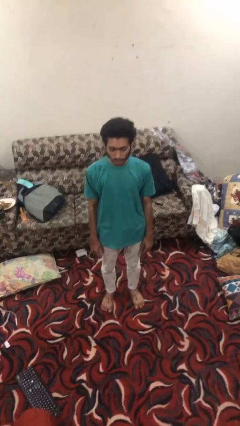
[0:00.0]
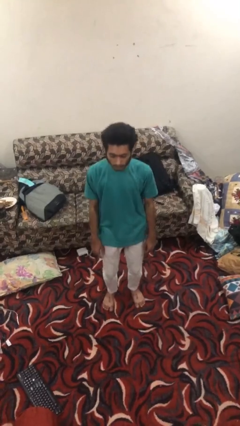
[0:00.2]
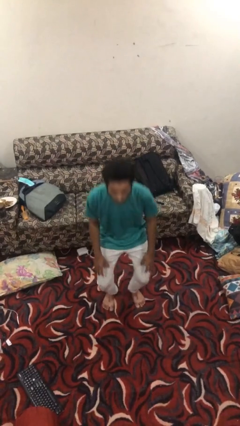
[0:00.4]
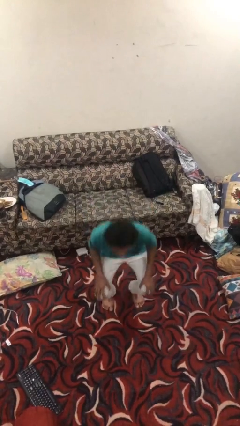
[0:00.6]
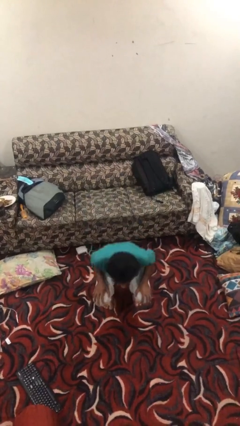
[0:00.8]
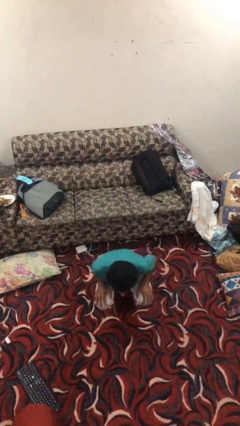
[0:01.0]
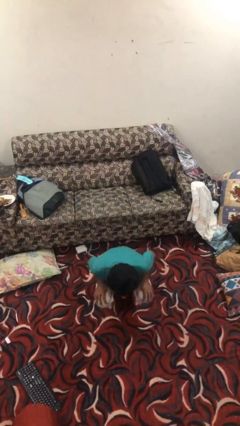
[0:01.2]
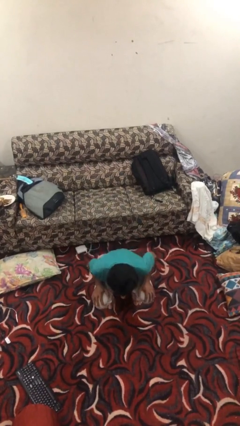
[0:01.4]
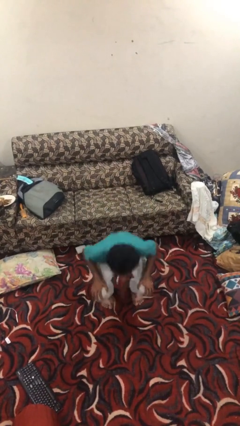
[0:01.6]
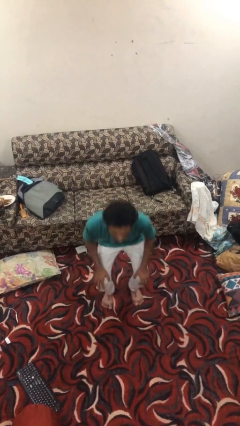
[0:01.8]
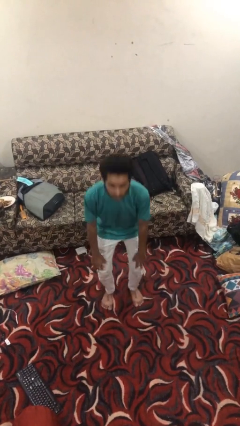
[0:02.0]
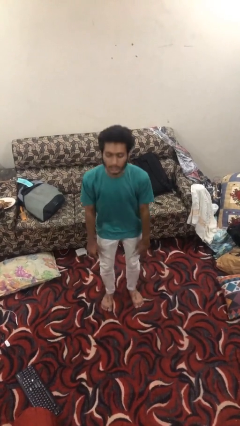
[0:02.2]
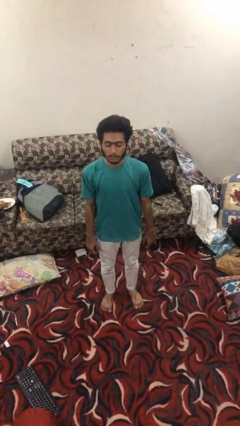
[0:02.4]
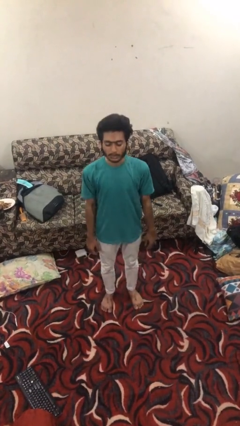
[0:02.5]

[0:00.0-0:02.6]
person exercises with situp

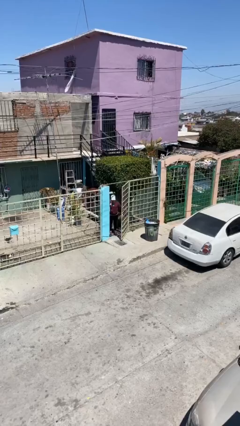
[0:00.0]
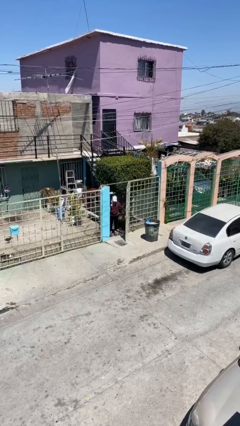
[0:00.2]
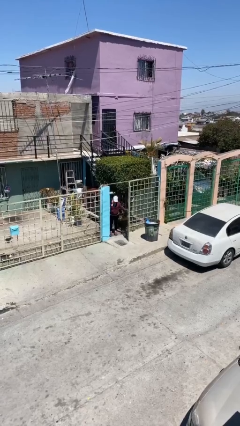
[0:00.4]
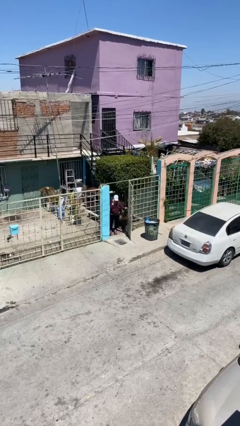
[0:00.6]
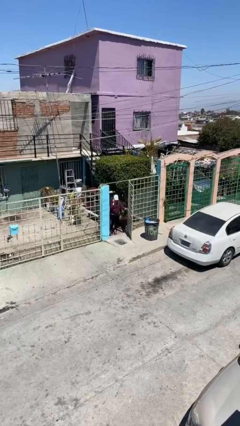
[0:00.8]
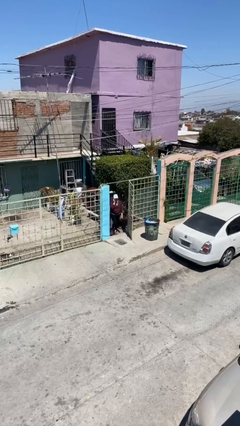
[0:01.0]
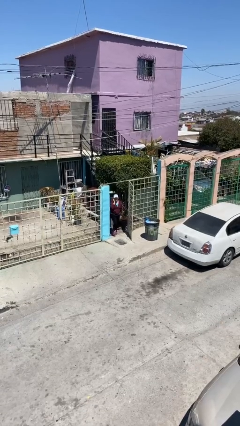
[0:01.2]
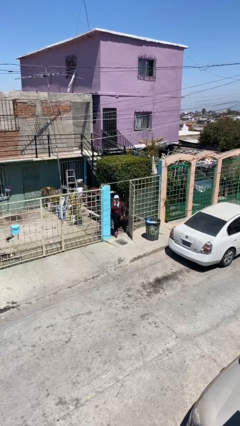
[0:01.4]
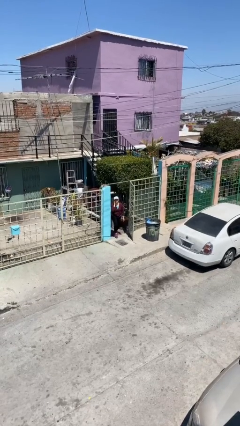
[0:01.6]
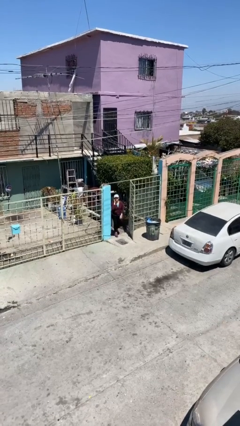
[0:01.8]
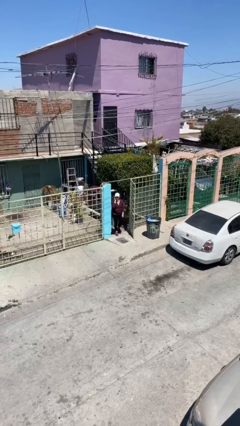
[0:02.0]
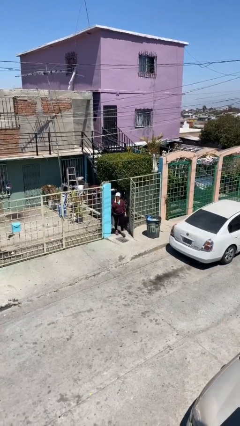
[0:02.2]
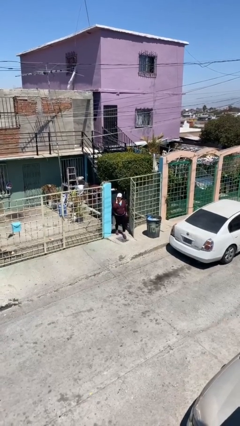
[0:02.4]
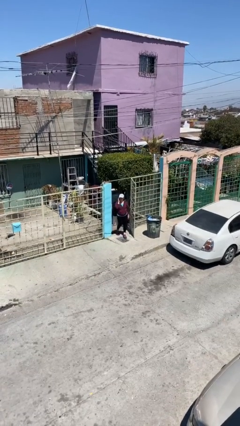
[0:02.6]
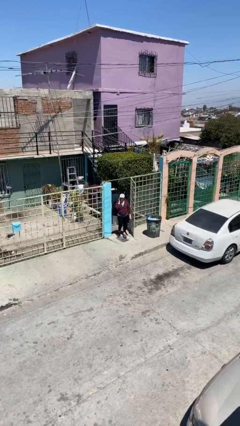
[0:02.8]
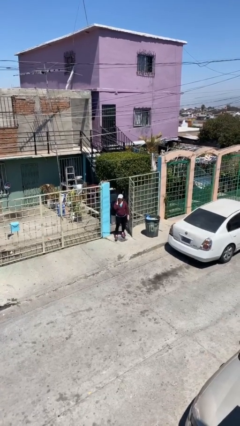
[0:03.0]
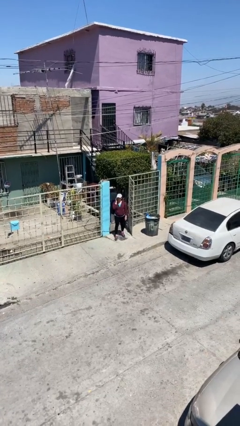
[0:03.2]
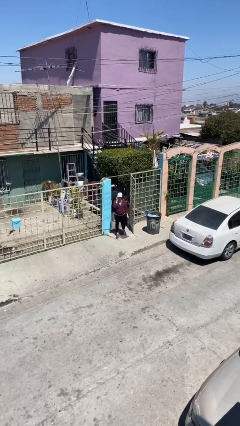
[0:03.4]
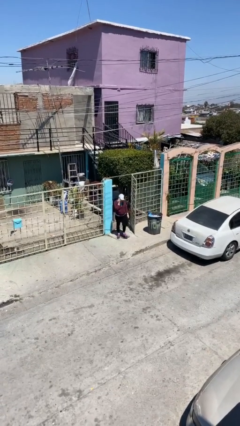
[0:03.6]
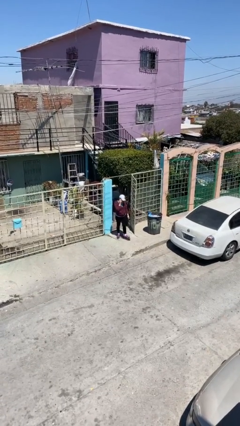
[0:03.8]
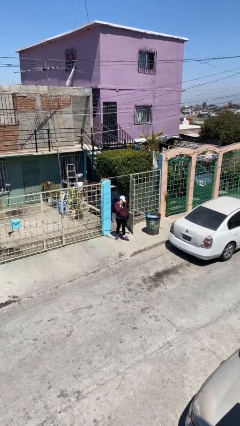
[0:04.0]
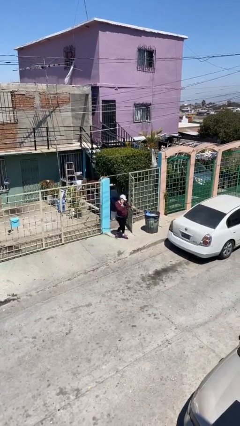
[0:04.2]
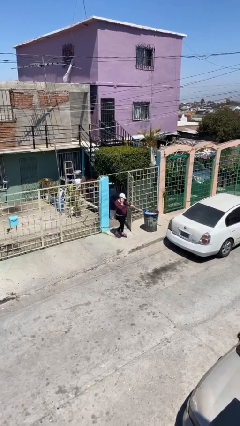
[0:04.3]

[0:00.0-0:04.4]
person enters scene through structure

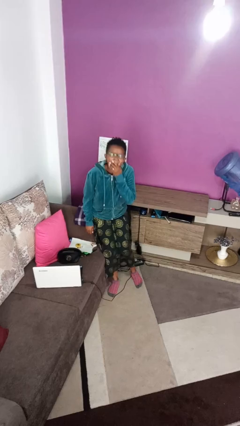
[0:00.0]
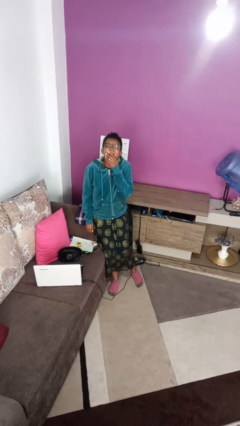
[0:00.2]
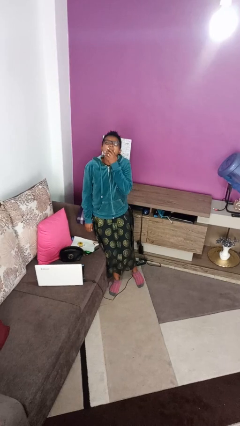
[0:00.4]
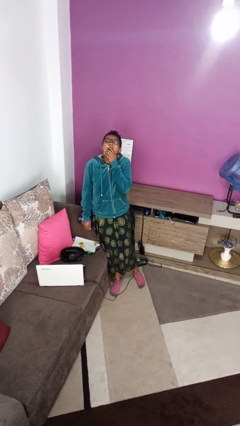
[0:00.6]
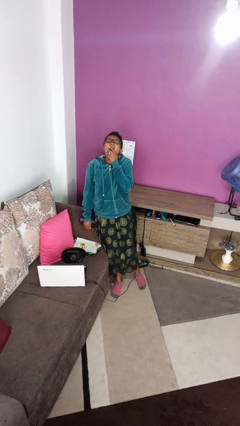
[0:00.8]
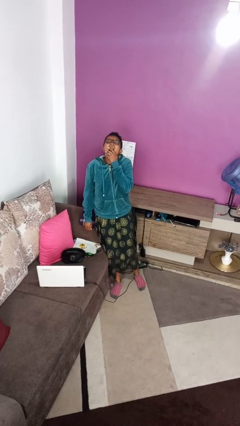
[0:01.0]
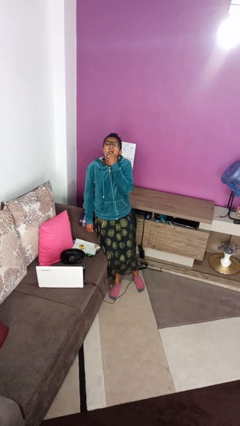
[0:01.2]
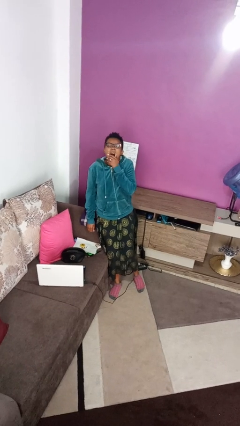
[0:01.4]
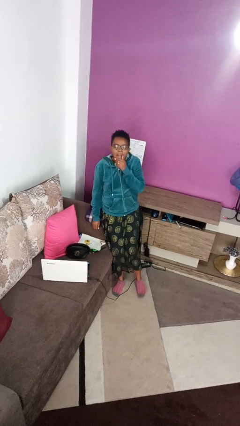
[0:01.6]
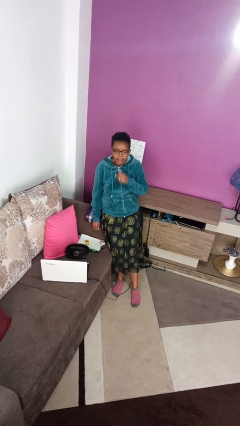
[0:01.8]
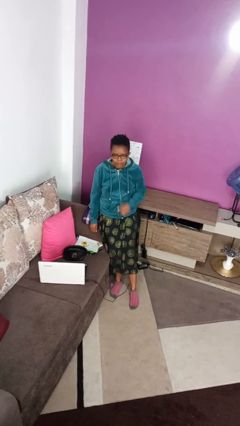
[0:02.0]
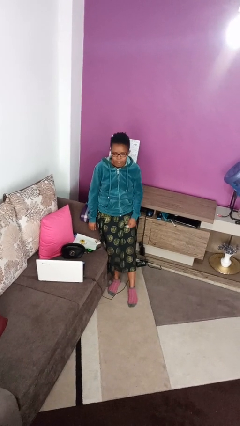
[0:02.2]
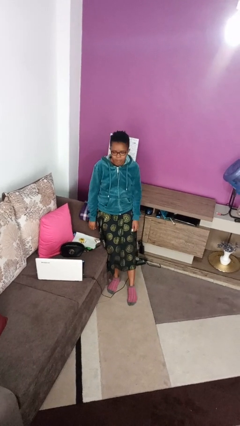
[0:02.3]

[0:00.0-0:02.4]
person yawns

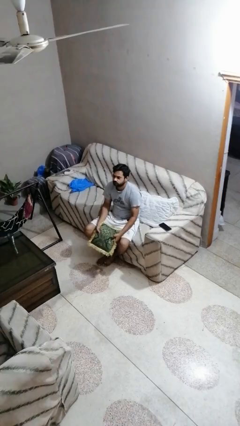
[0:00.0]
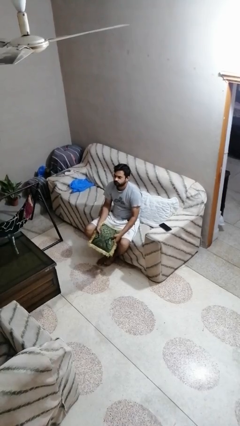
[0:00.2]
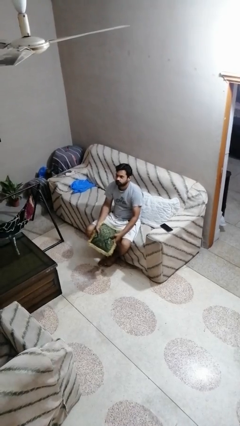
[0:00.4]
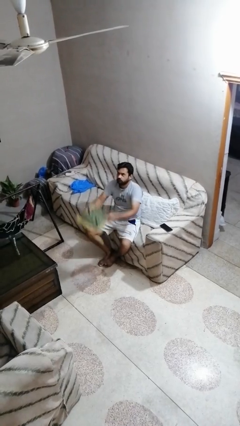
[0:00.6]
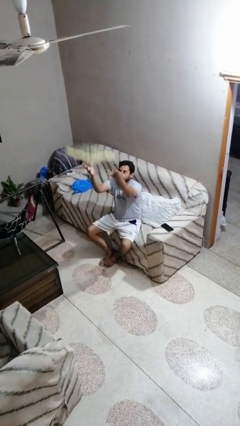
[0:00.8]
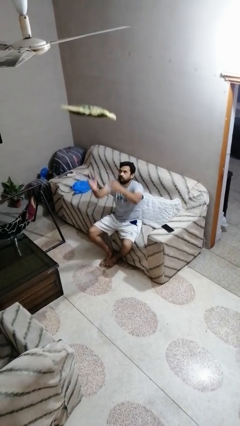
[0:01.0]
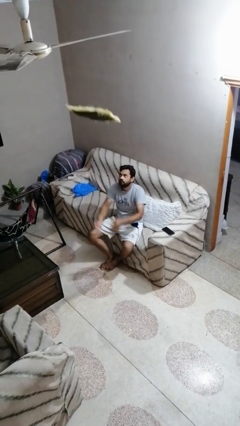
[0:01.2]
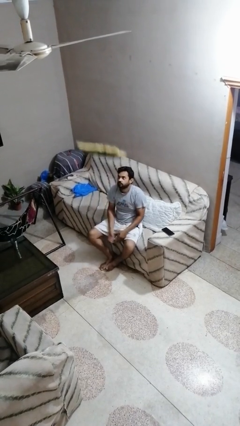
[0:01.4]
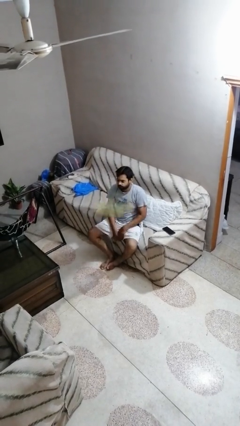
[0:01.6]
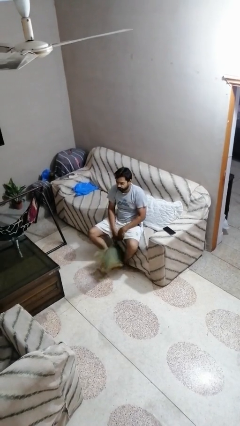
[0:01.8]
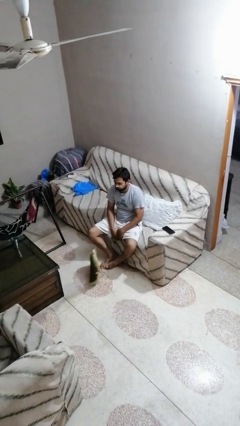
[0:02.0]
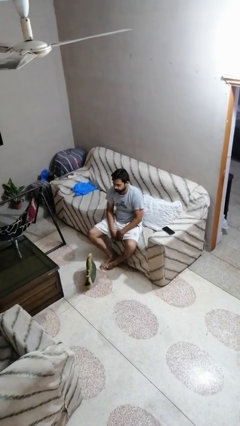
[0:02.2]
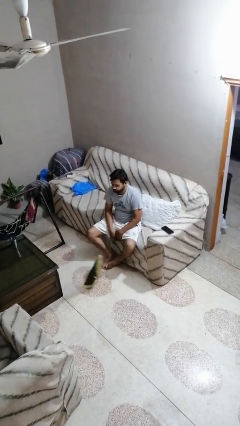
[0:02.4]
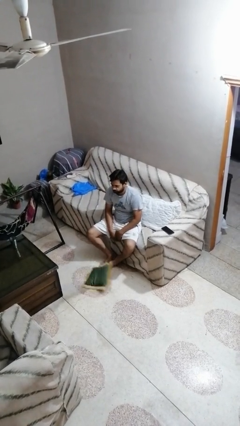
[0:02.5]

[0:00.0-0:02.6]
person throws object into air

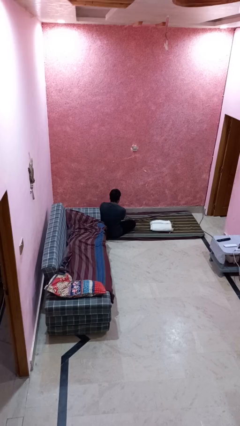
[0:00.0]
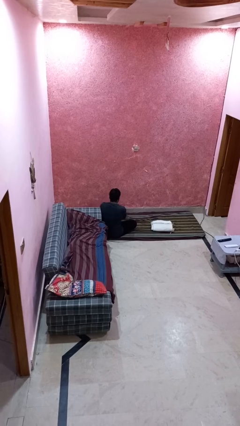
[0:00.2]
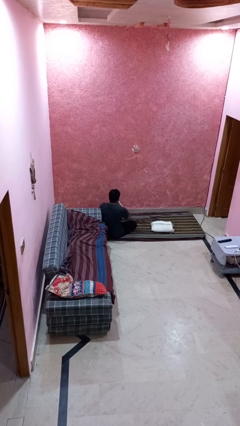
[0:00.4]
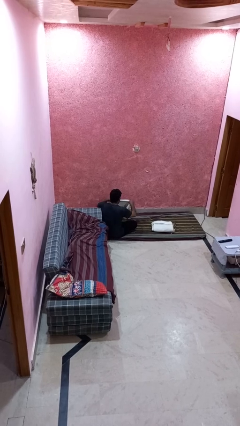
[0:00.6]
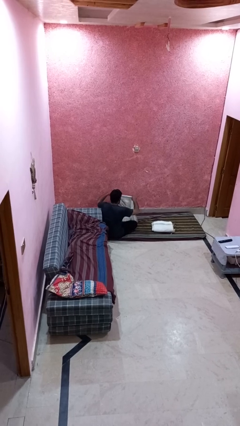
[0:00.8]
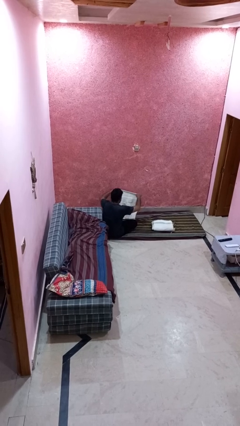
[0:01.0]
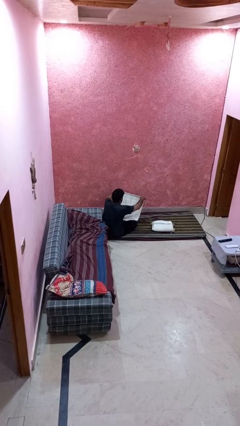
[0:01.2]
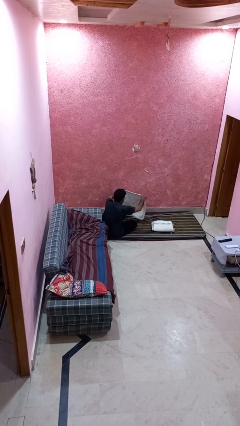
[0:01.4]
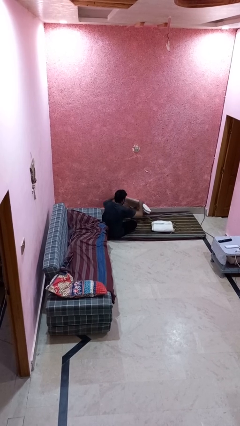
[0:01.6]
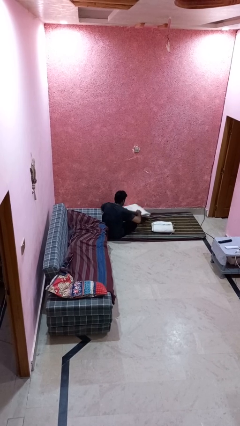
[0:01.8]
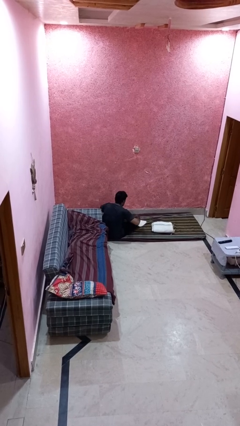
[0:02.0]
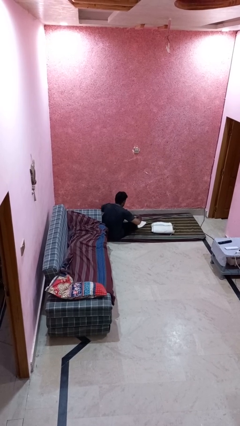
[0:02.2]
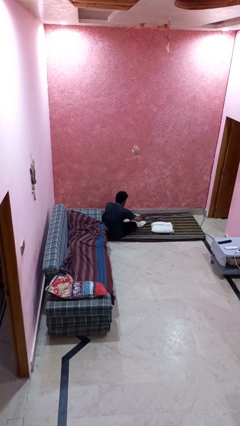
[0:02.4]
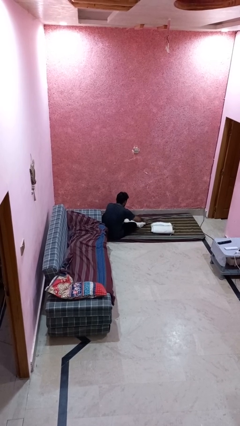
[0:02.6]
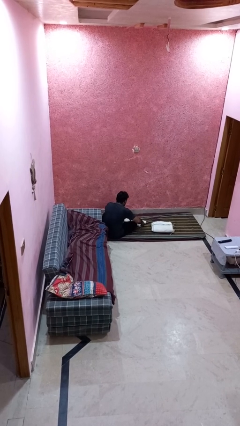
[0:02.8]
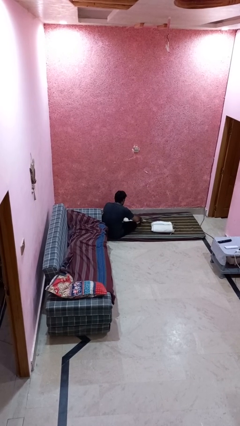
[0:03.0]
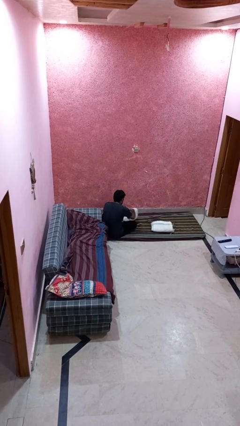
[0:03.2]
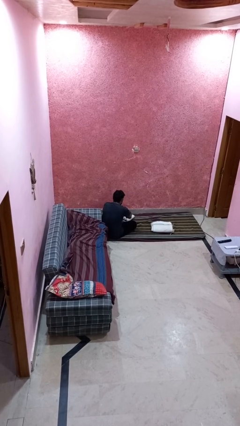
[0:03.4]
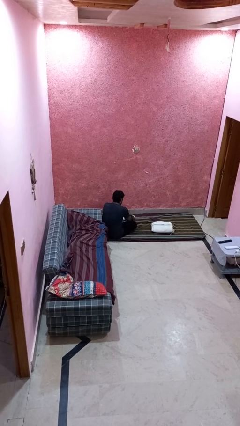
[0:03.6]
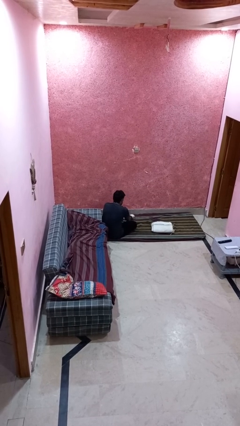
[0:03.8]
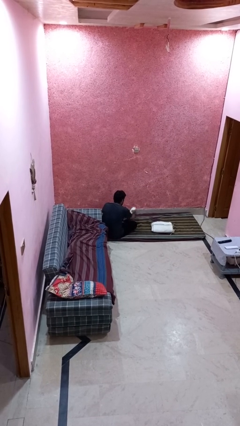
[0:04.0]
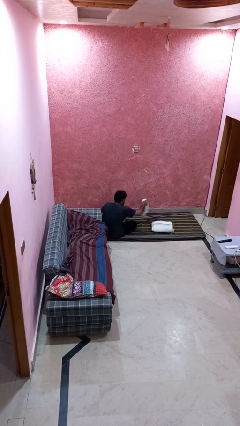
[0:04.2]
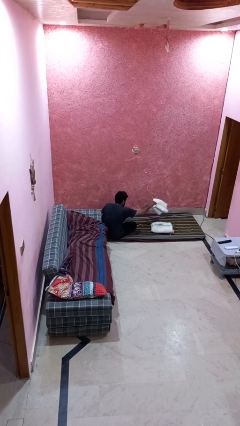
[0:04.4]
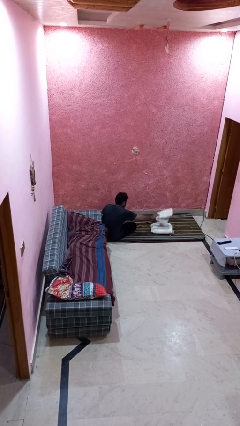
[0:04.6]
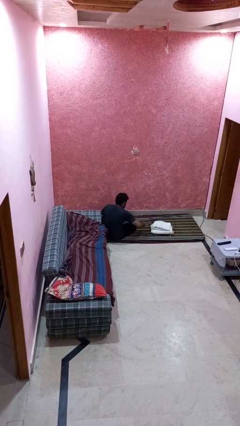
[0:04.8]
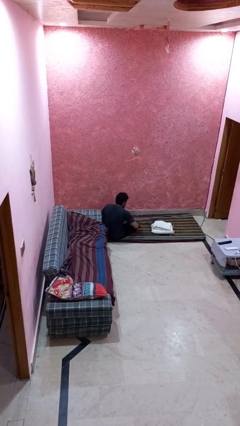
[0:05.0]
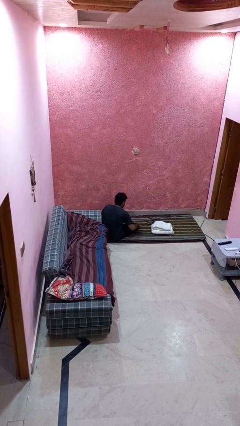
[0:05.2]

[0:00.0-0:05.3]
person folds towel

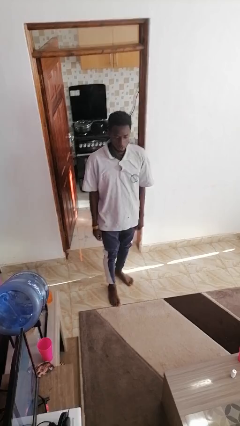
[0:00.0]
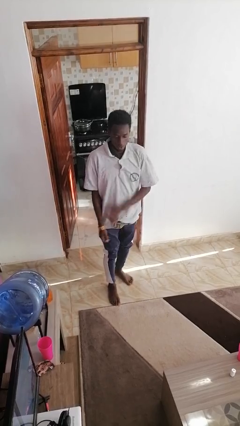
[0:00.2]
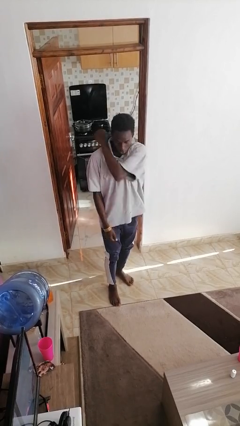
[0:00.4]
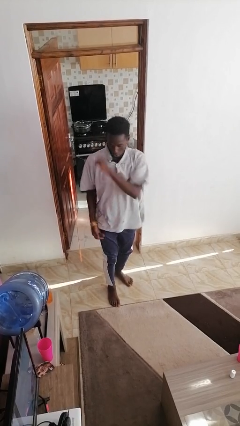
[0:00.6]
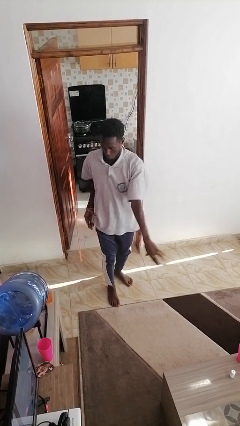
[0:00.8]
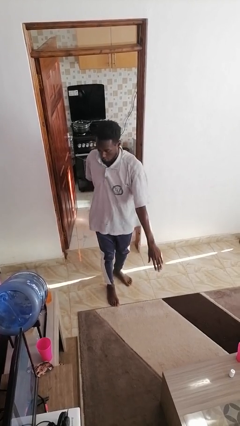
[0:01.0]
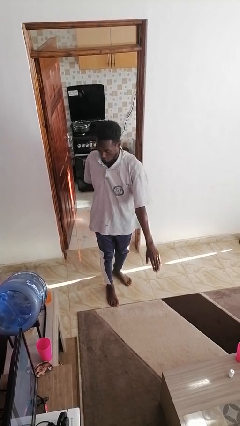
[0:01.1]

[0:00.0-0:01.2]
person karate chop
